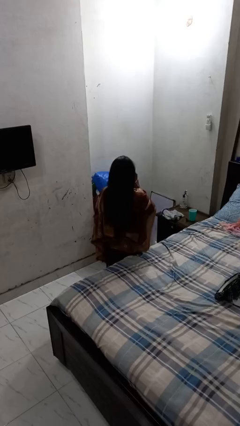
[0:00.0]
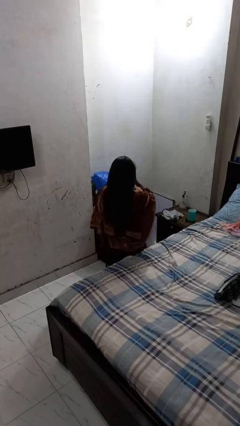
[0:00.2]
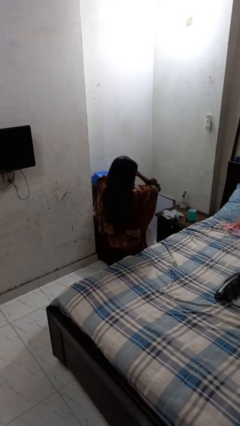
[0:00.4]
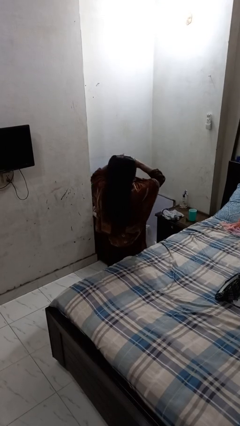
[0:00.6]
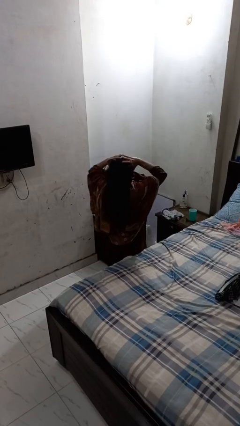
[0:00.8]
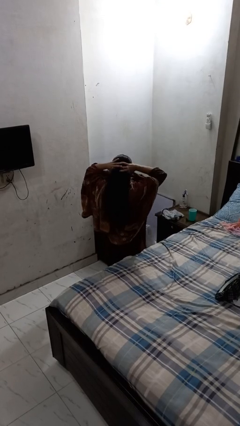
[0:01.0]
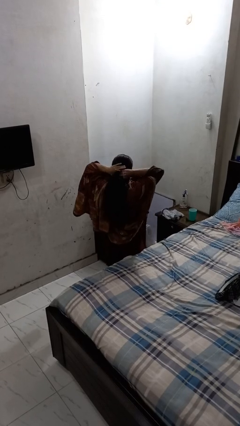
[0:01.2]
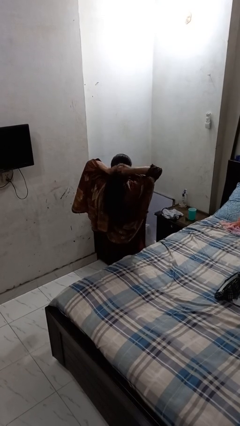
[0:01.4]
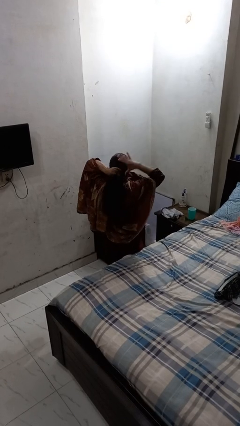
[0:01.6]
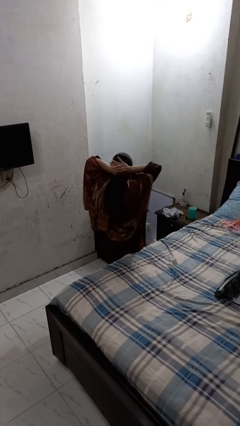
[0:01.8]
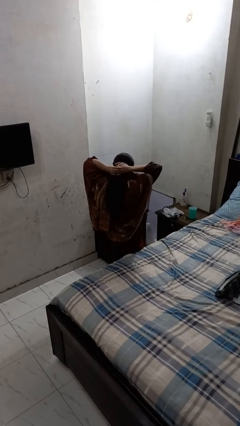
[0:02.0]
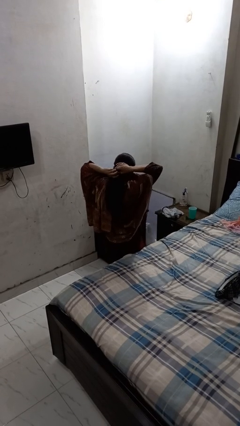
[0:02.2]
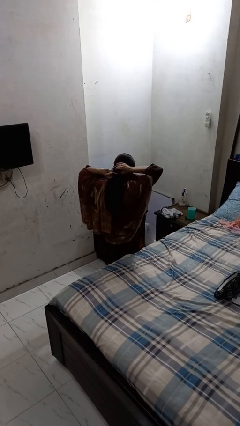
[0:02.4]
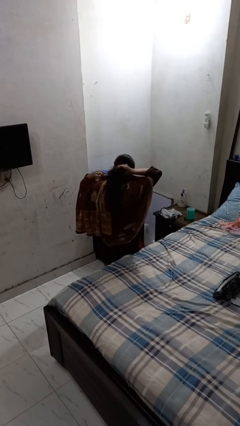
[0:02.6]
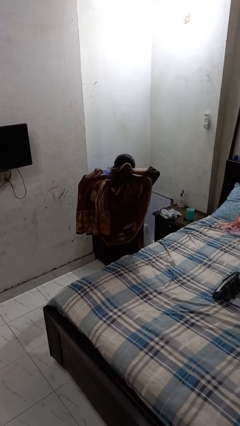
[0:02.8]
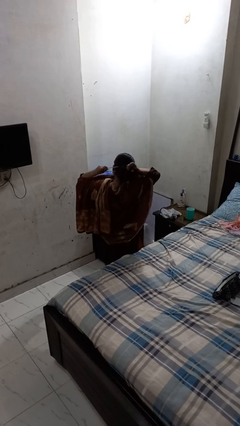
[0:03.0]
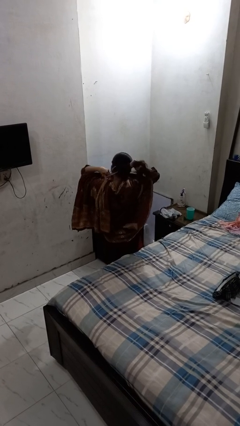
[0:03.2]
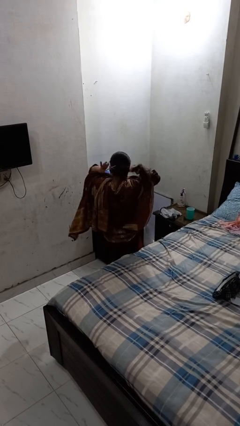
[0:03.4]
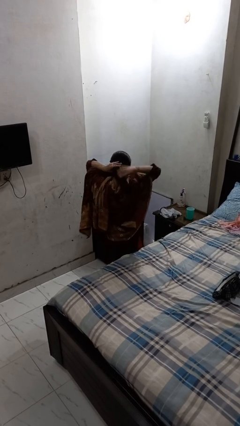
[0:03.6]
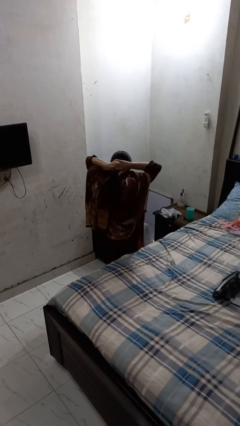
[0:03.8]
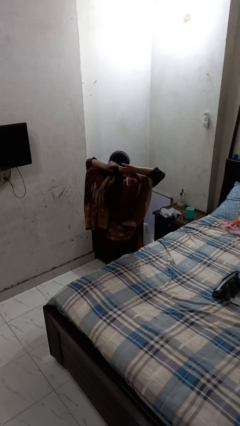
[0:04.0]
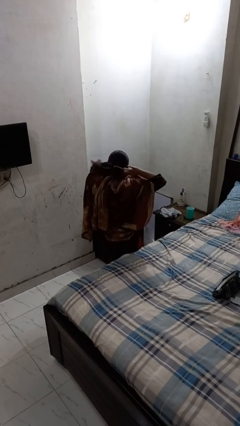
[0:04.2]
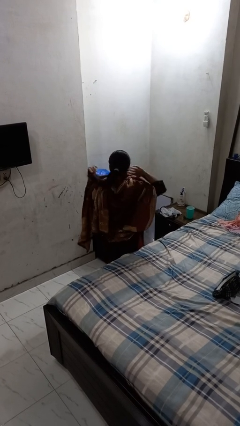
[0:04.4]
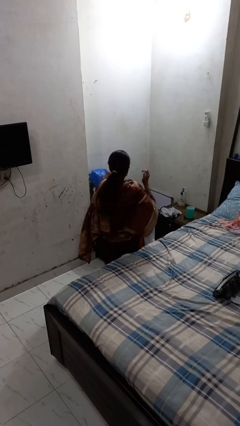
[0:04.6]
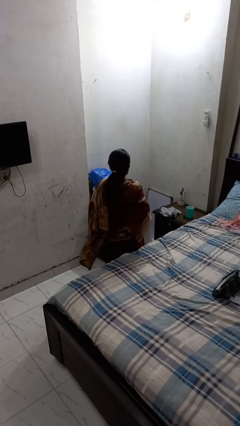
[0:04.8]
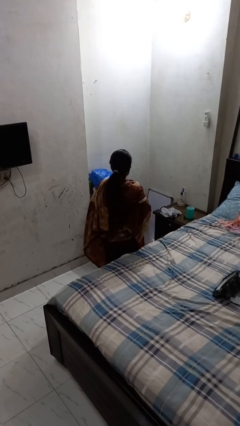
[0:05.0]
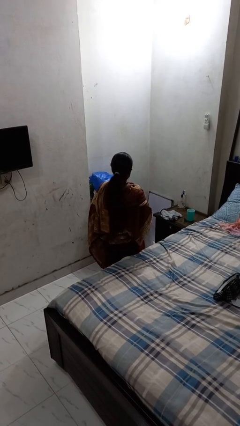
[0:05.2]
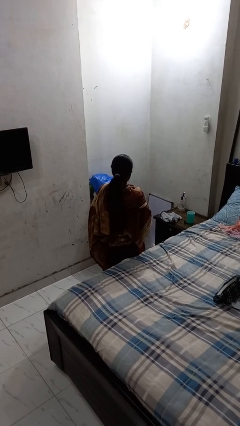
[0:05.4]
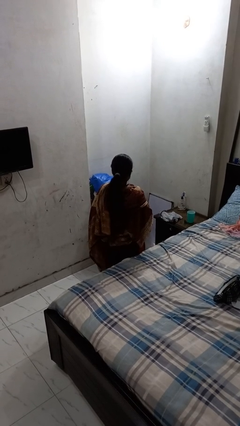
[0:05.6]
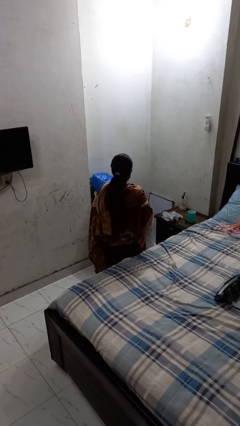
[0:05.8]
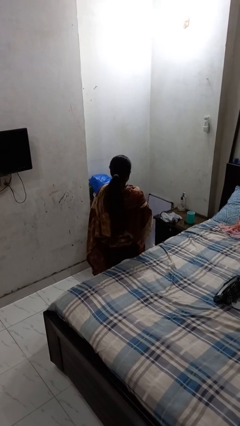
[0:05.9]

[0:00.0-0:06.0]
person puts hair in ponytail

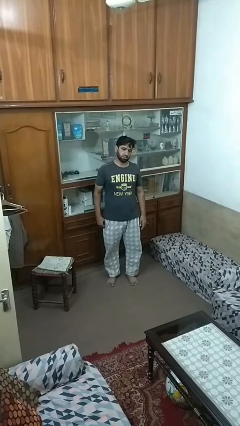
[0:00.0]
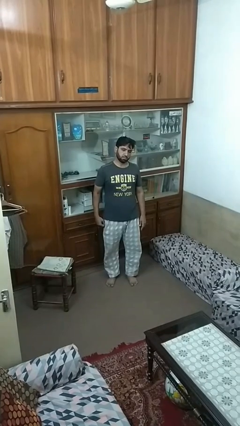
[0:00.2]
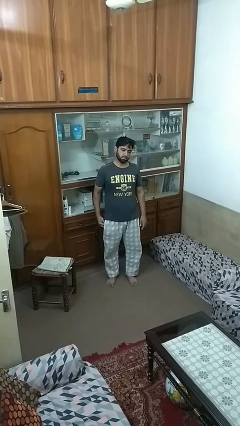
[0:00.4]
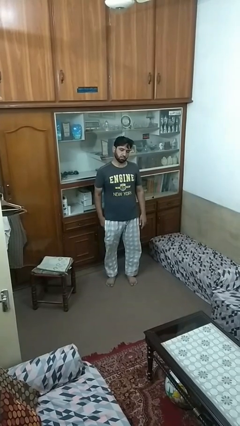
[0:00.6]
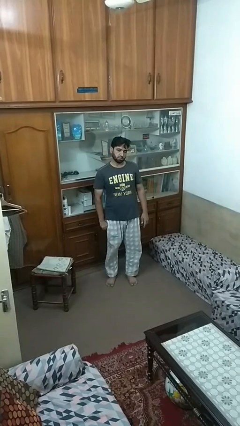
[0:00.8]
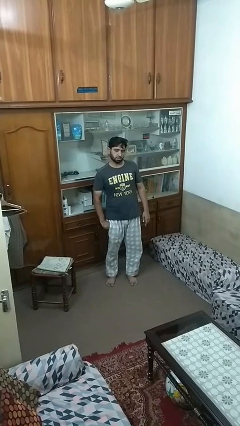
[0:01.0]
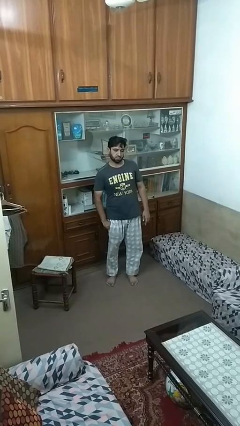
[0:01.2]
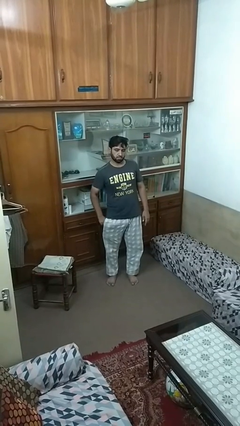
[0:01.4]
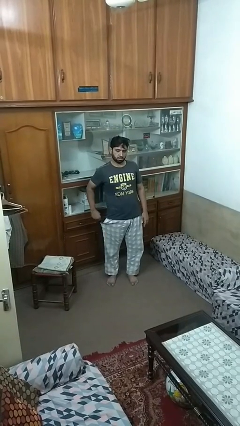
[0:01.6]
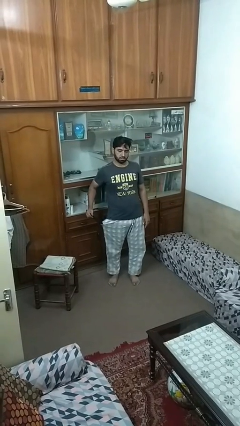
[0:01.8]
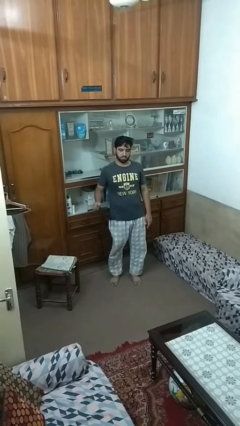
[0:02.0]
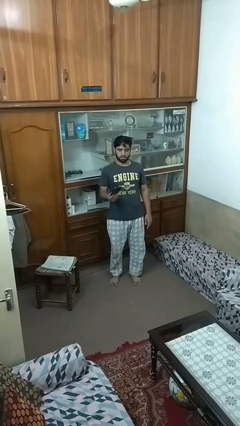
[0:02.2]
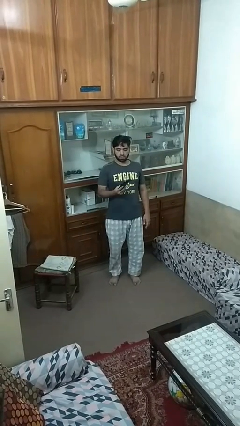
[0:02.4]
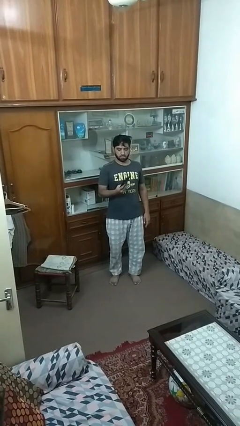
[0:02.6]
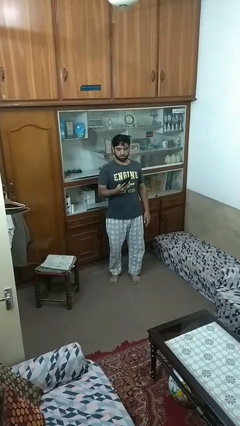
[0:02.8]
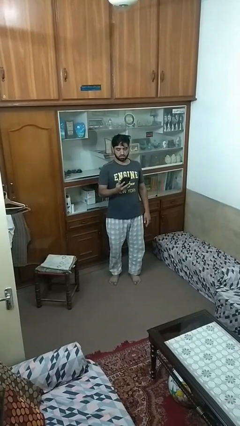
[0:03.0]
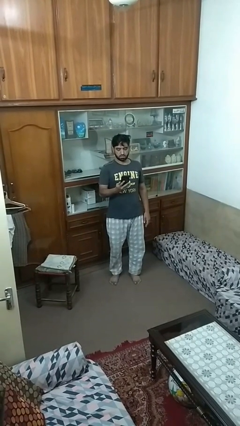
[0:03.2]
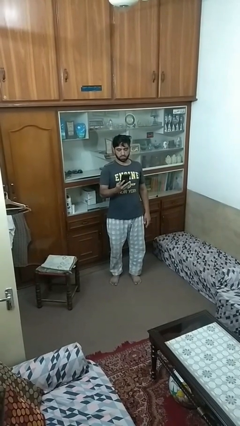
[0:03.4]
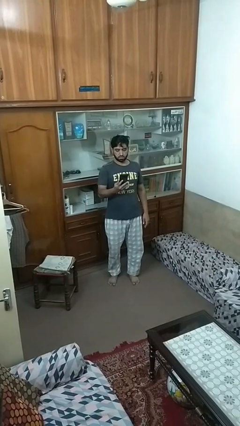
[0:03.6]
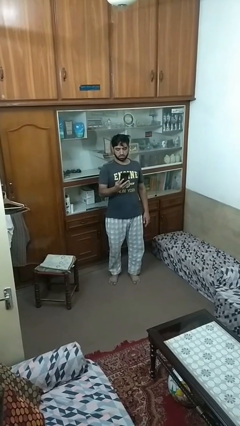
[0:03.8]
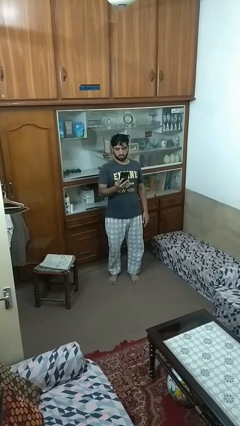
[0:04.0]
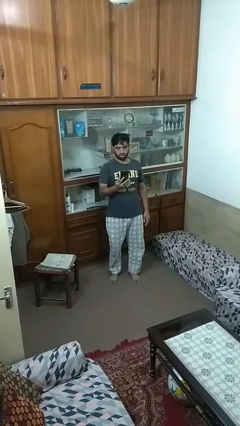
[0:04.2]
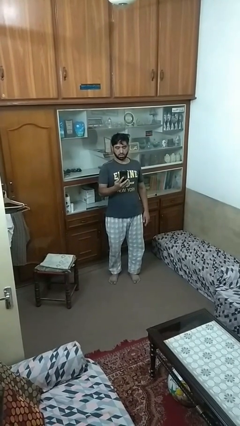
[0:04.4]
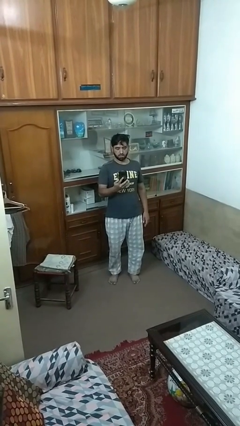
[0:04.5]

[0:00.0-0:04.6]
person takes phone from pocket

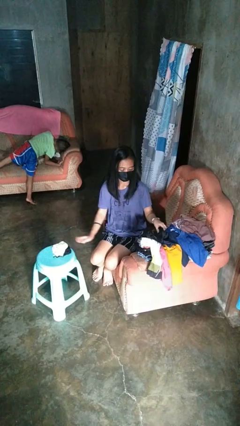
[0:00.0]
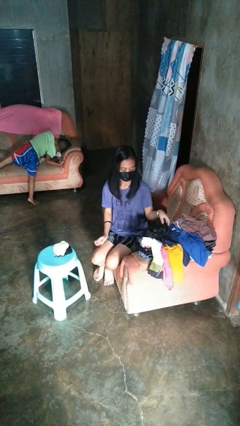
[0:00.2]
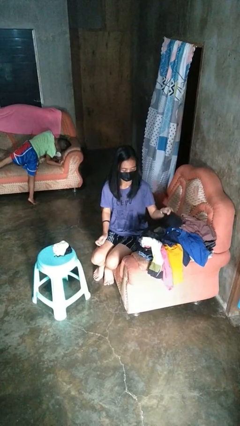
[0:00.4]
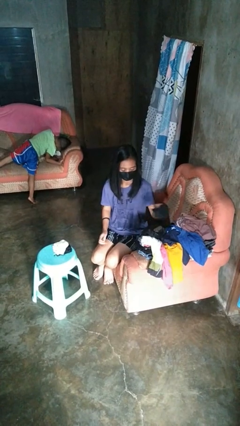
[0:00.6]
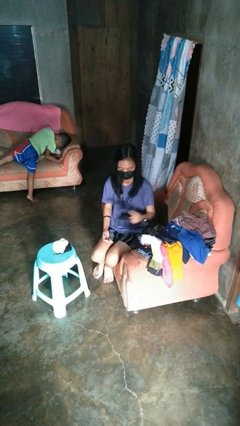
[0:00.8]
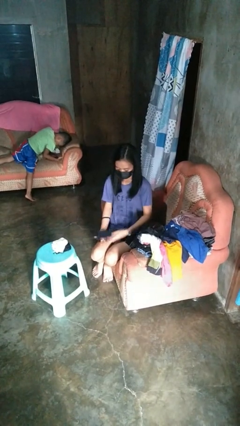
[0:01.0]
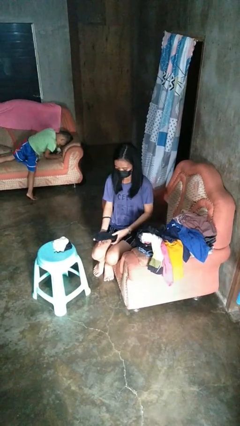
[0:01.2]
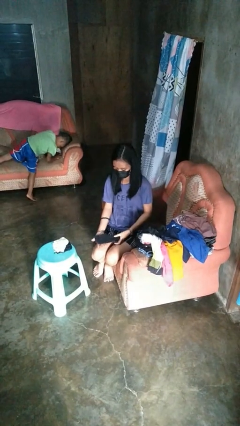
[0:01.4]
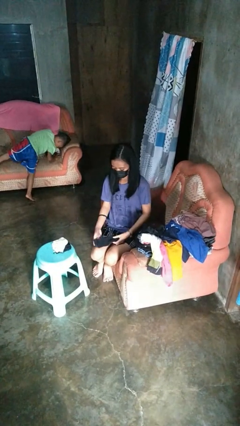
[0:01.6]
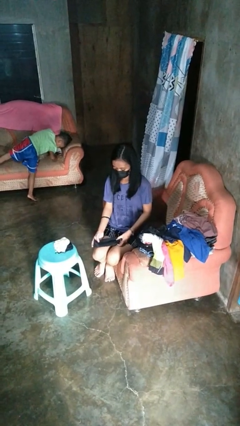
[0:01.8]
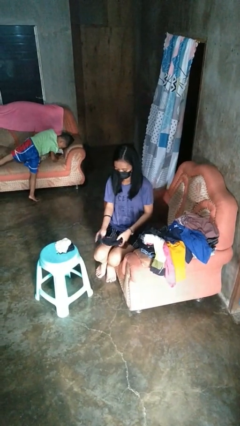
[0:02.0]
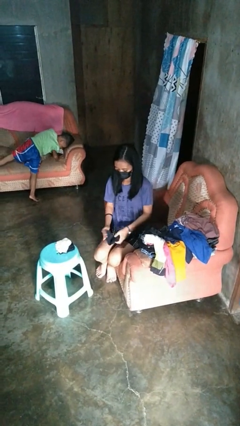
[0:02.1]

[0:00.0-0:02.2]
person folds socks

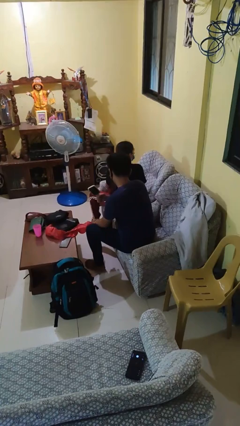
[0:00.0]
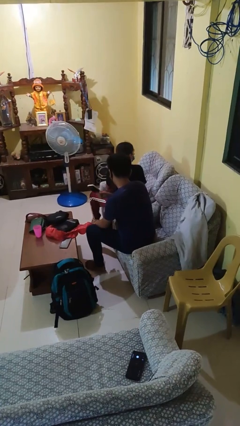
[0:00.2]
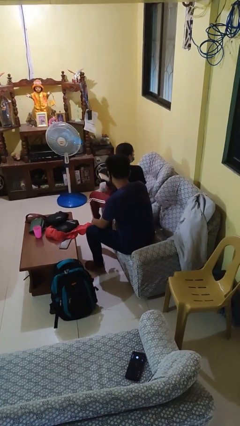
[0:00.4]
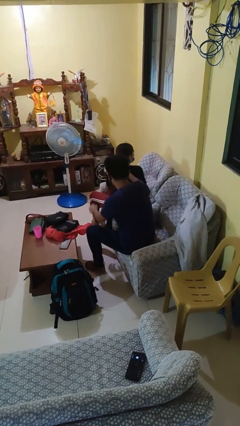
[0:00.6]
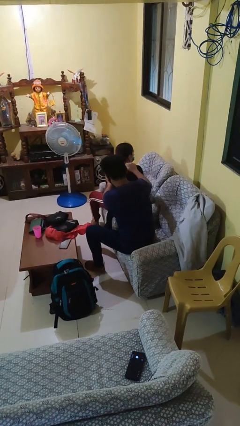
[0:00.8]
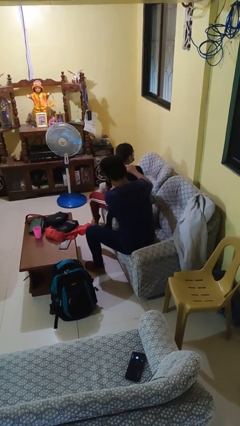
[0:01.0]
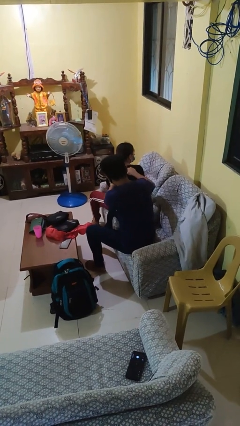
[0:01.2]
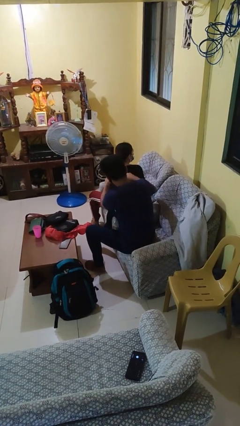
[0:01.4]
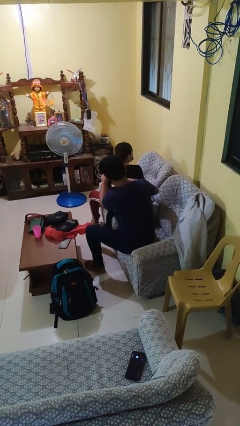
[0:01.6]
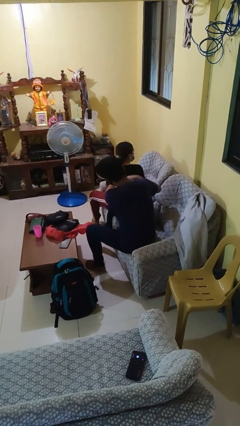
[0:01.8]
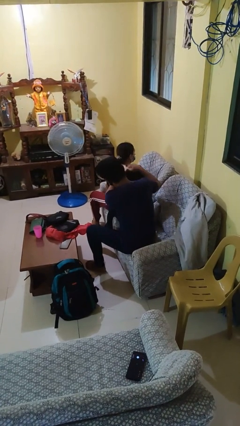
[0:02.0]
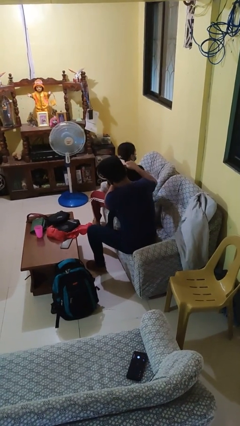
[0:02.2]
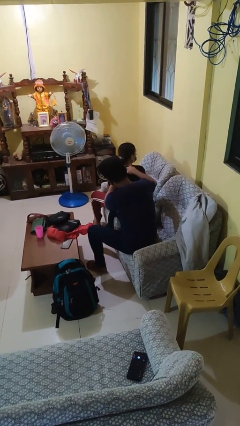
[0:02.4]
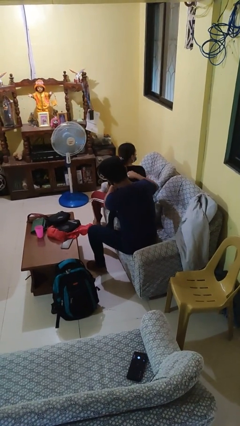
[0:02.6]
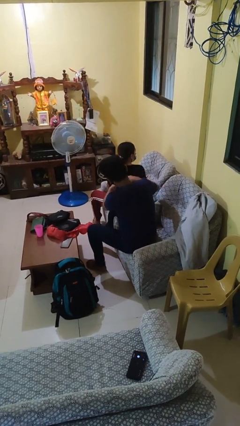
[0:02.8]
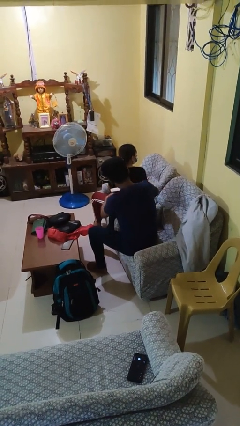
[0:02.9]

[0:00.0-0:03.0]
person brushes hair of person

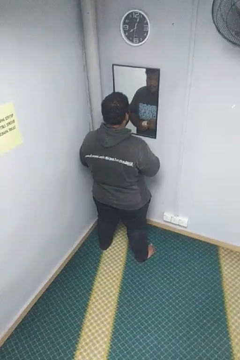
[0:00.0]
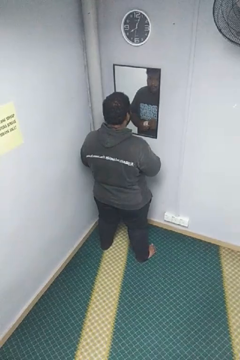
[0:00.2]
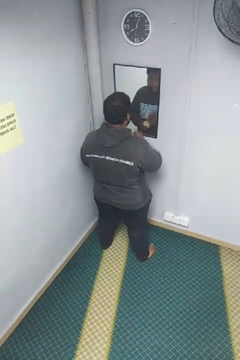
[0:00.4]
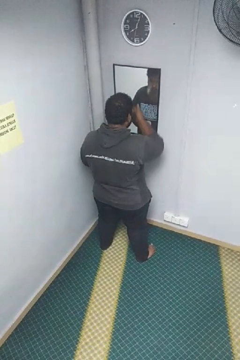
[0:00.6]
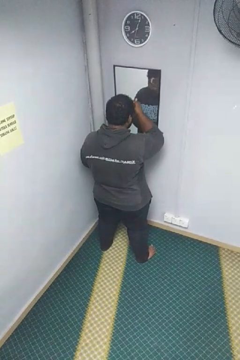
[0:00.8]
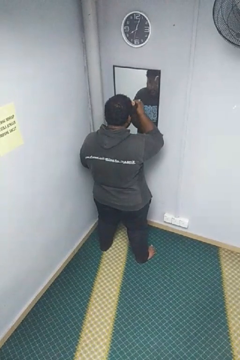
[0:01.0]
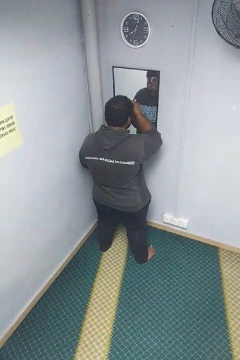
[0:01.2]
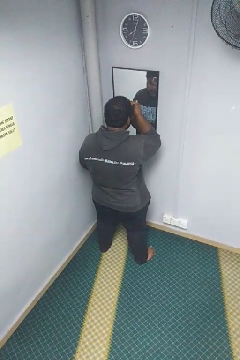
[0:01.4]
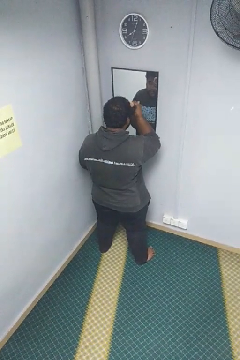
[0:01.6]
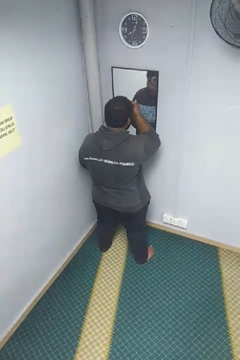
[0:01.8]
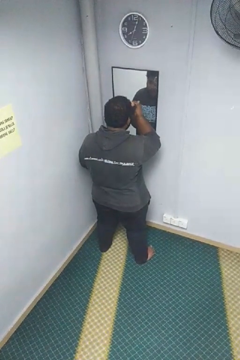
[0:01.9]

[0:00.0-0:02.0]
person applies foundation makeup

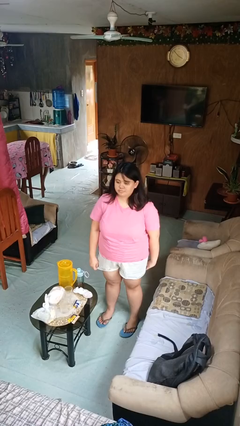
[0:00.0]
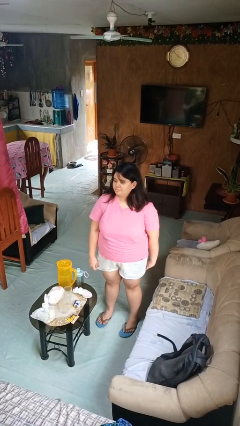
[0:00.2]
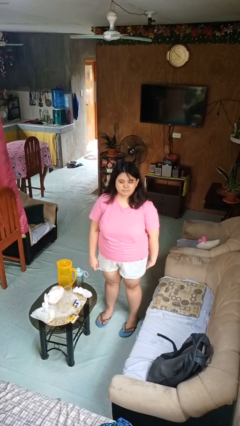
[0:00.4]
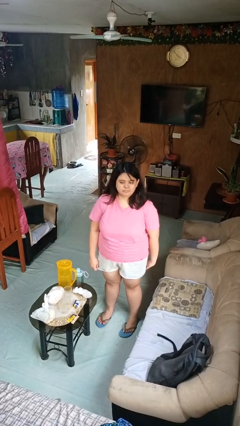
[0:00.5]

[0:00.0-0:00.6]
person shakes head
